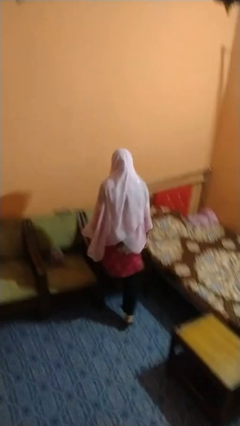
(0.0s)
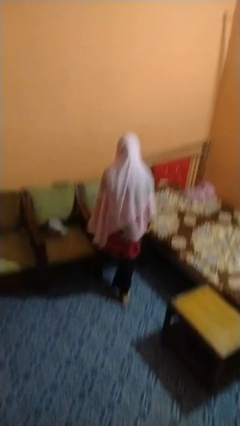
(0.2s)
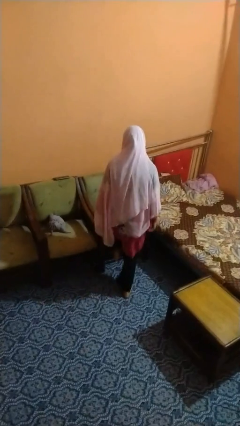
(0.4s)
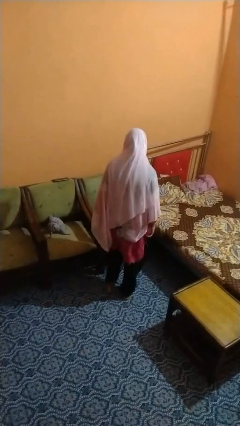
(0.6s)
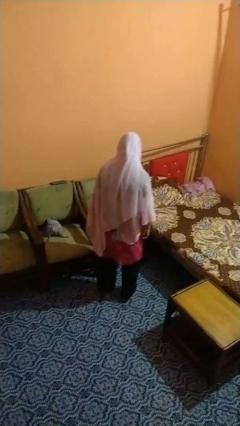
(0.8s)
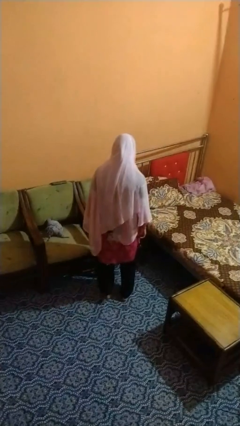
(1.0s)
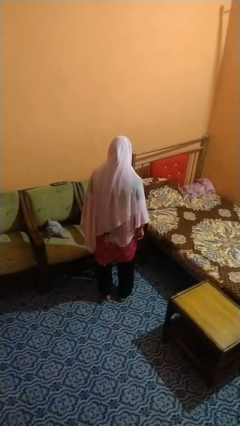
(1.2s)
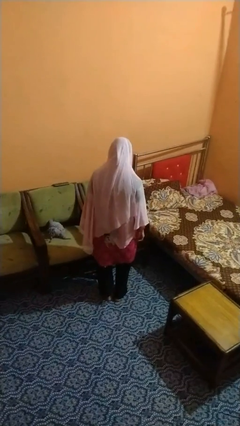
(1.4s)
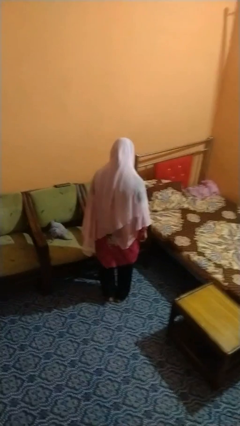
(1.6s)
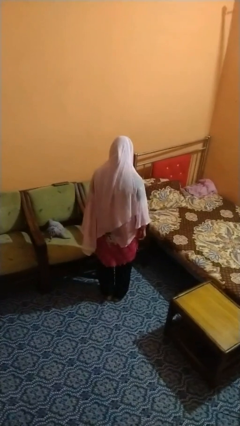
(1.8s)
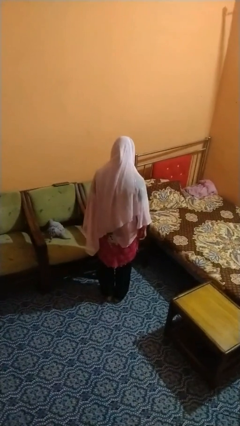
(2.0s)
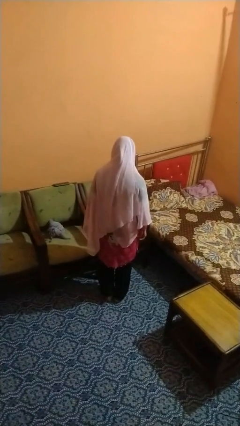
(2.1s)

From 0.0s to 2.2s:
person climbs off chair

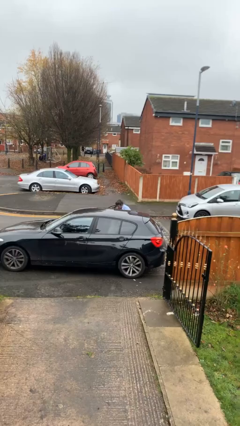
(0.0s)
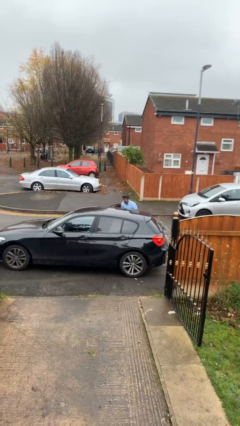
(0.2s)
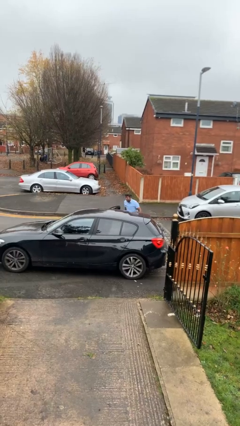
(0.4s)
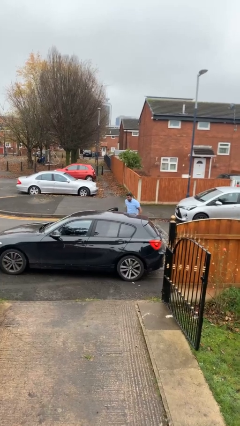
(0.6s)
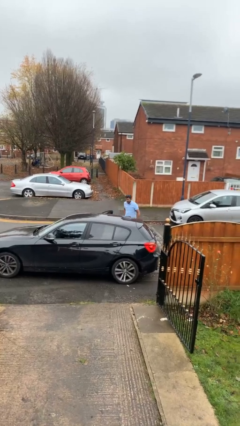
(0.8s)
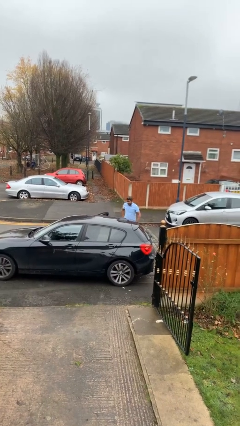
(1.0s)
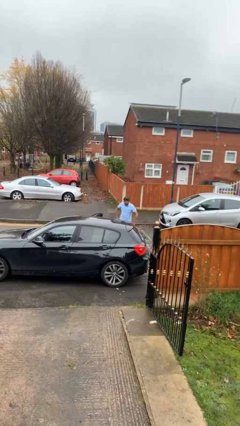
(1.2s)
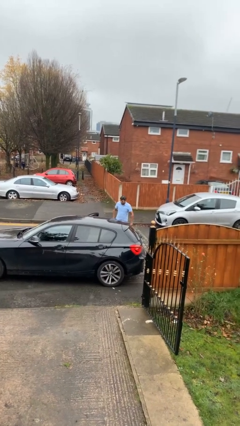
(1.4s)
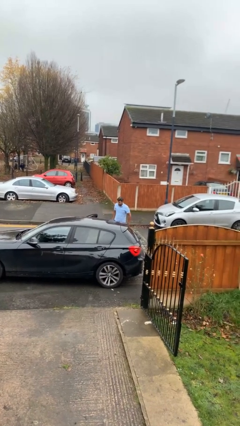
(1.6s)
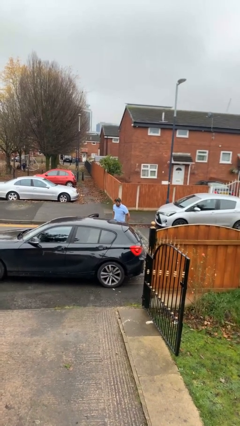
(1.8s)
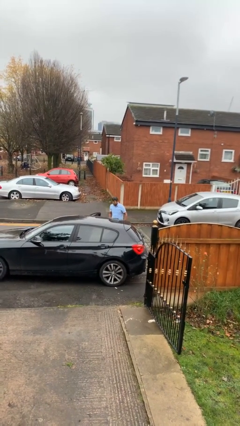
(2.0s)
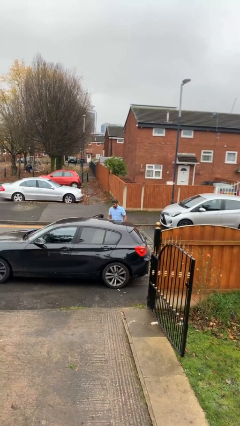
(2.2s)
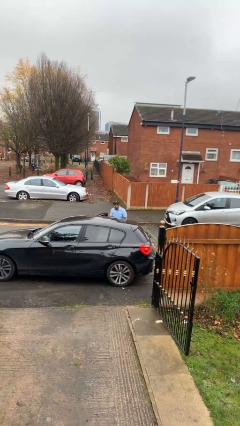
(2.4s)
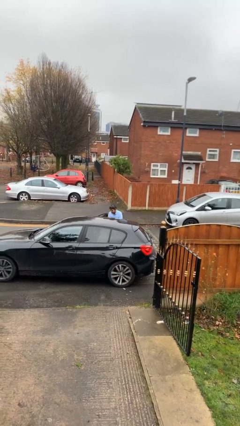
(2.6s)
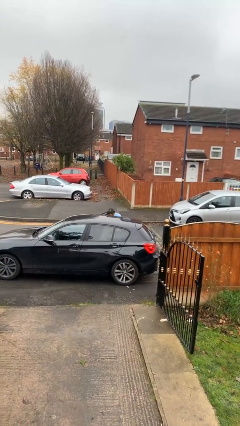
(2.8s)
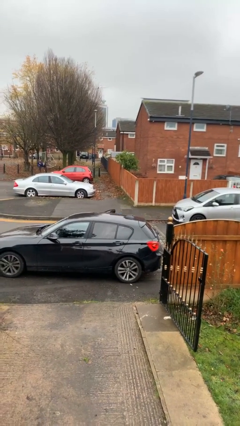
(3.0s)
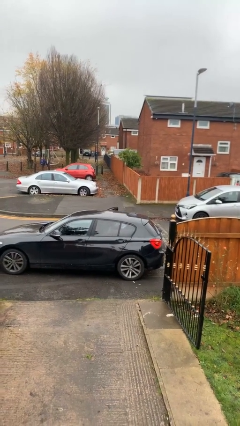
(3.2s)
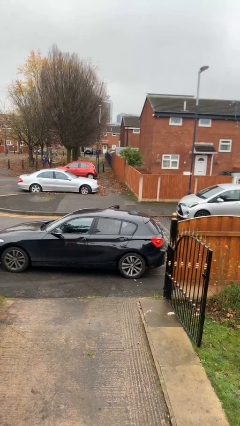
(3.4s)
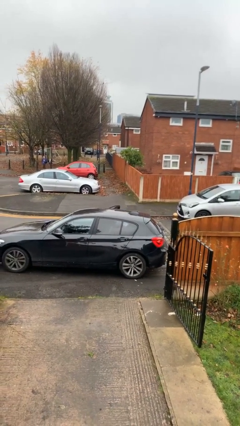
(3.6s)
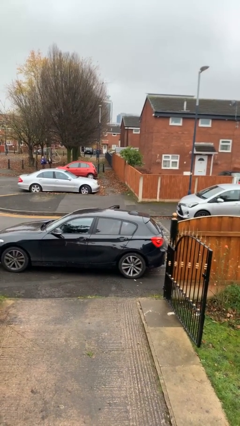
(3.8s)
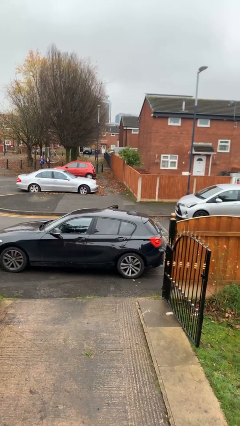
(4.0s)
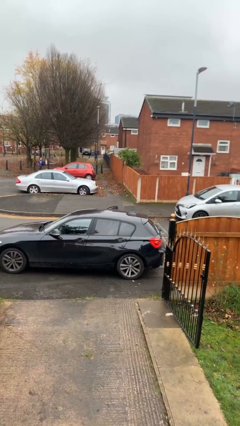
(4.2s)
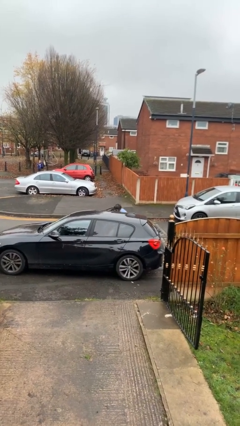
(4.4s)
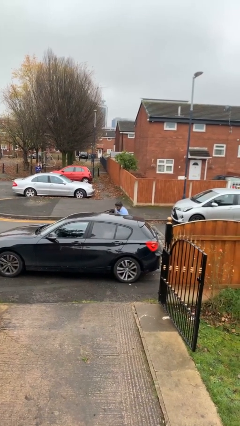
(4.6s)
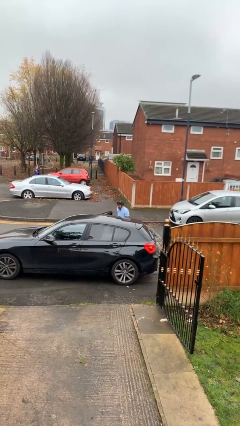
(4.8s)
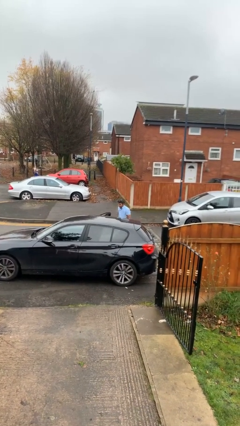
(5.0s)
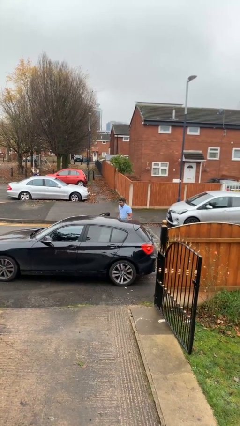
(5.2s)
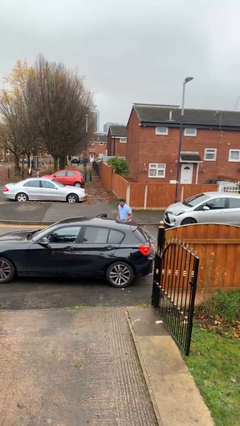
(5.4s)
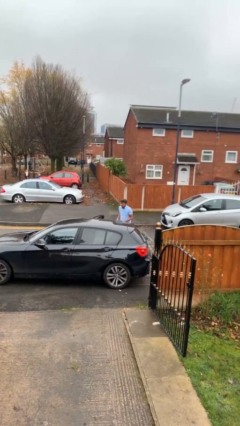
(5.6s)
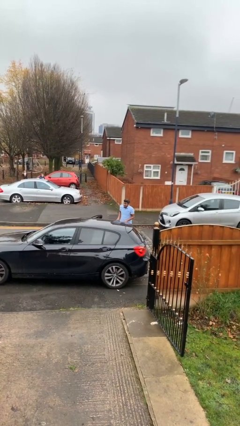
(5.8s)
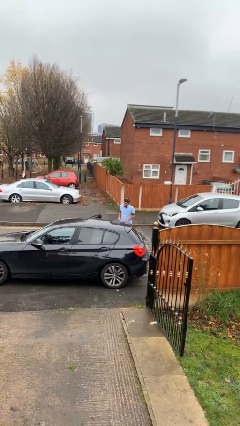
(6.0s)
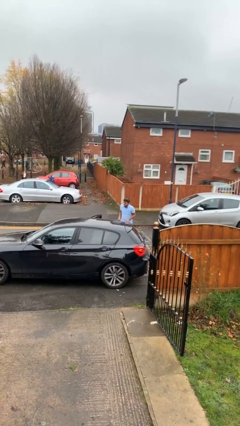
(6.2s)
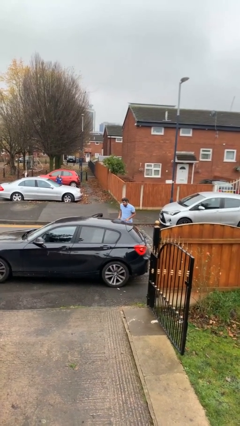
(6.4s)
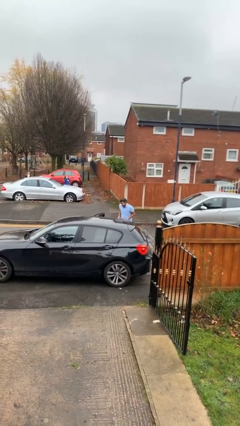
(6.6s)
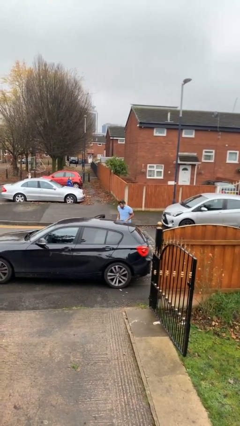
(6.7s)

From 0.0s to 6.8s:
person unloads car

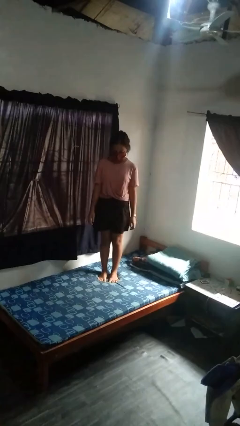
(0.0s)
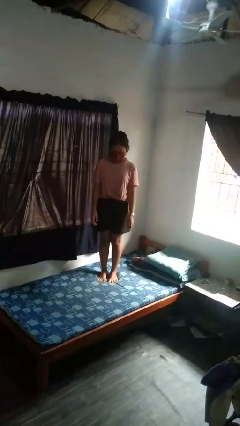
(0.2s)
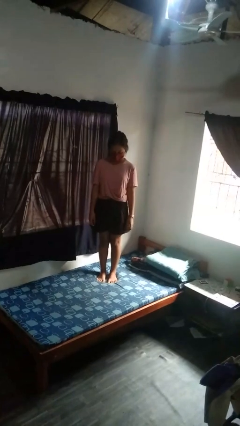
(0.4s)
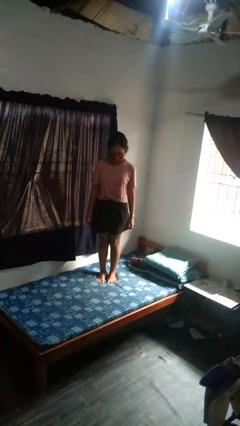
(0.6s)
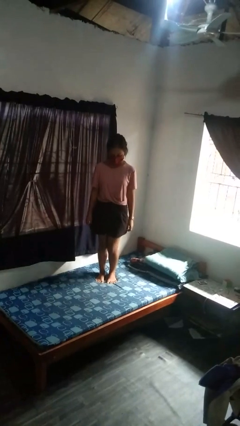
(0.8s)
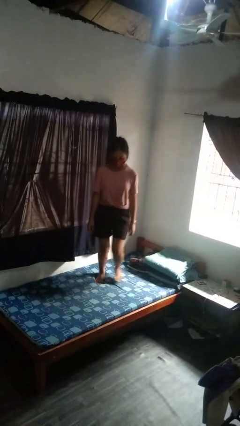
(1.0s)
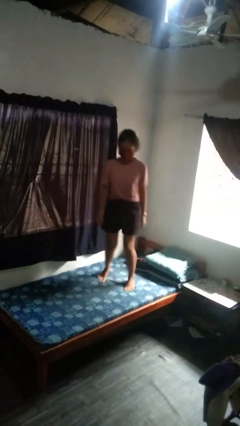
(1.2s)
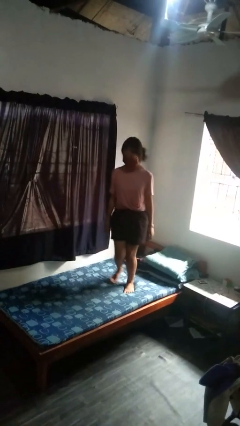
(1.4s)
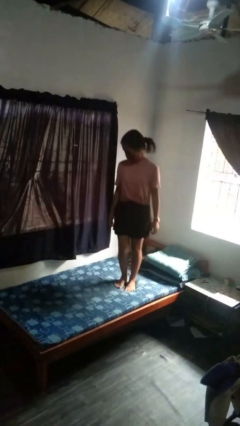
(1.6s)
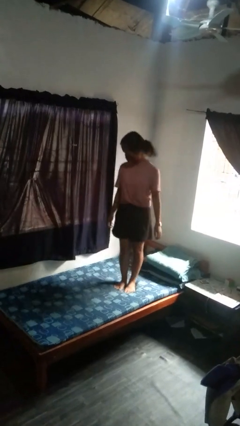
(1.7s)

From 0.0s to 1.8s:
person jumps on bed

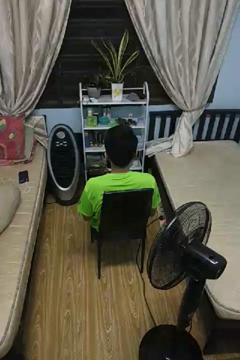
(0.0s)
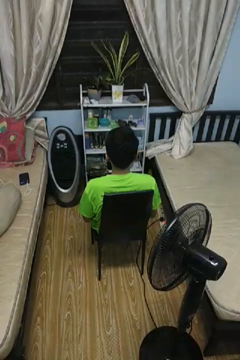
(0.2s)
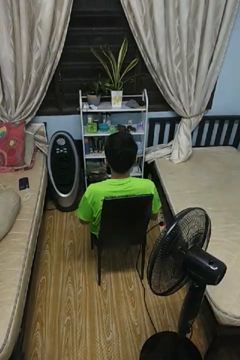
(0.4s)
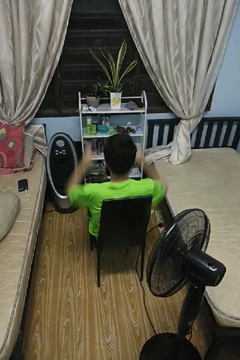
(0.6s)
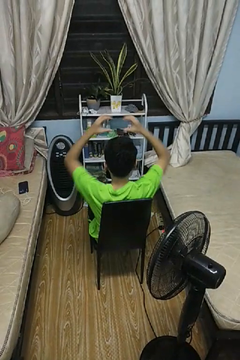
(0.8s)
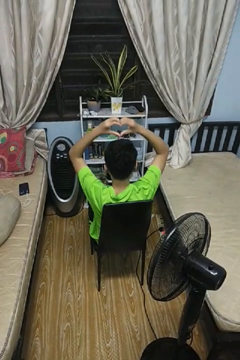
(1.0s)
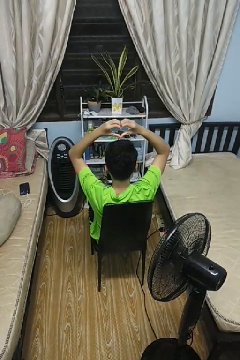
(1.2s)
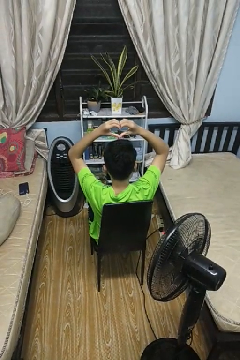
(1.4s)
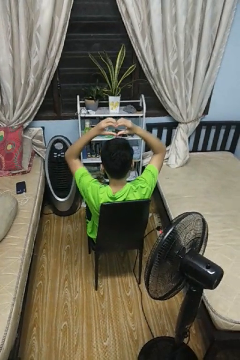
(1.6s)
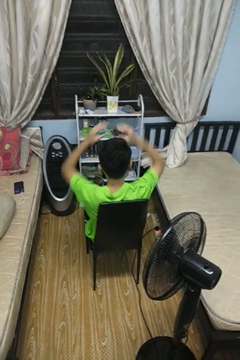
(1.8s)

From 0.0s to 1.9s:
person gestures heart

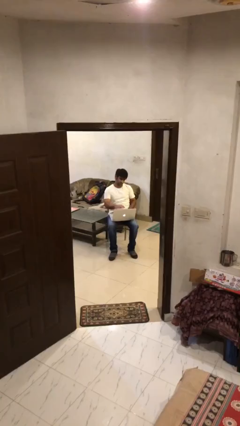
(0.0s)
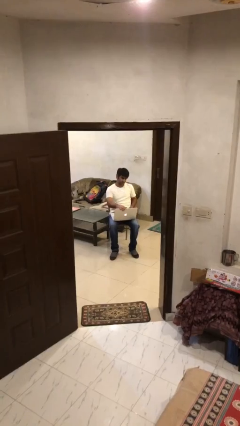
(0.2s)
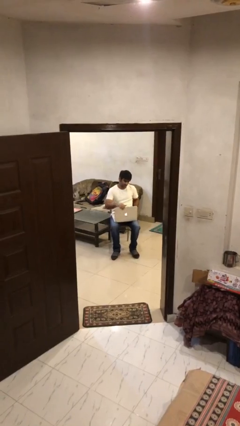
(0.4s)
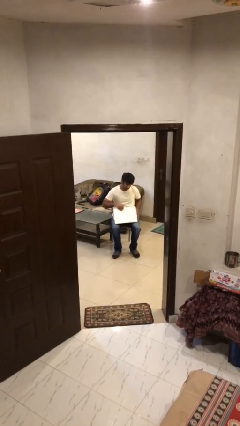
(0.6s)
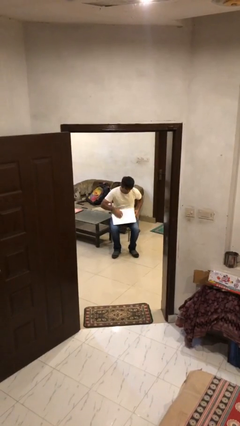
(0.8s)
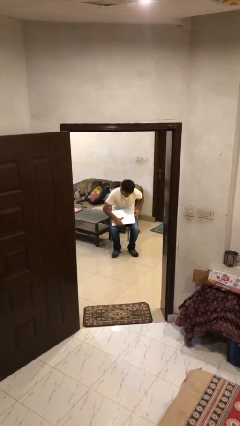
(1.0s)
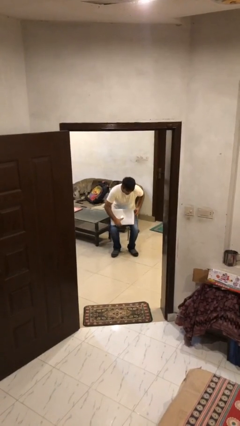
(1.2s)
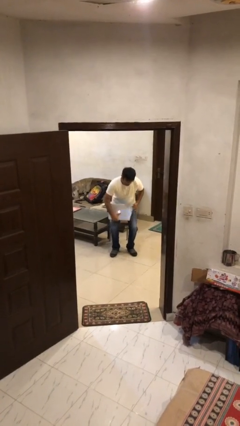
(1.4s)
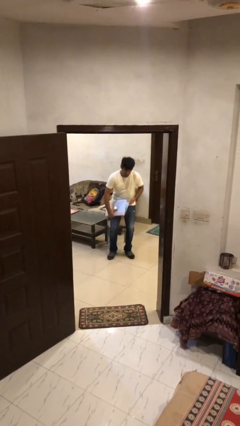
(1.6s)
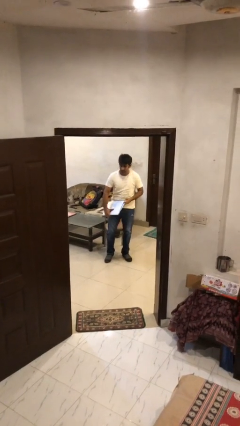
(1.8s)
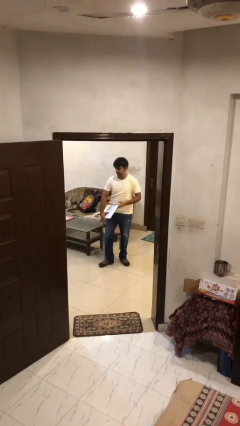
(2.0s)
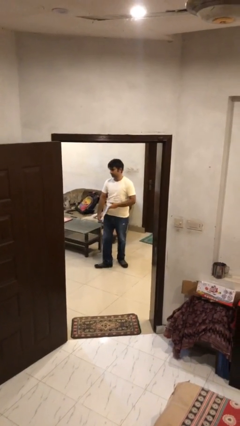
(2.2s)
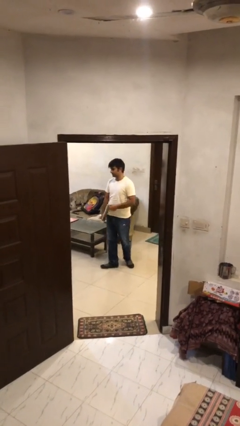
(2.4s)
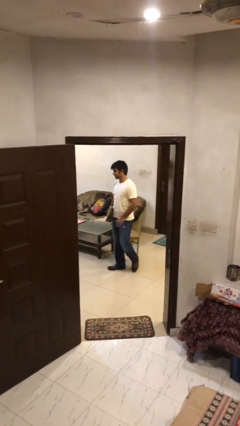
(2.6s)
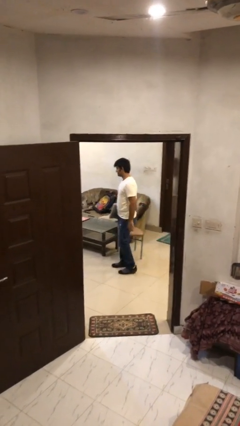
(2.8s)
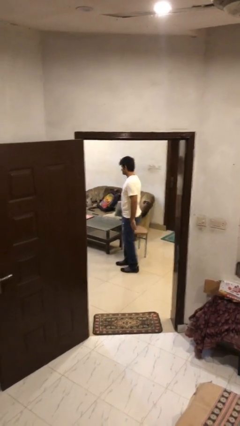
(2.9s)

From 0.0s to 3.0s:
person stands up

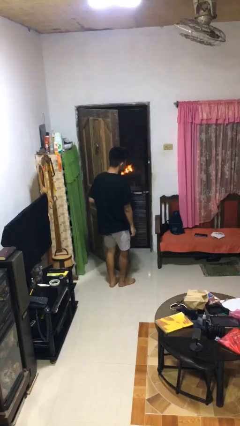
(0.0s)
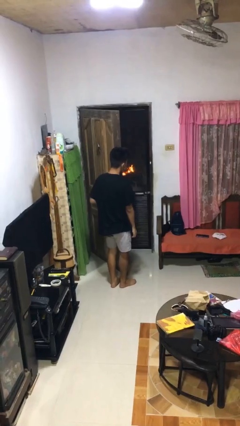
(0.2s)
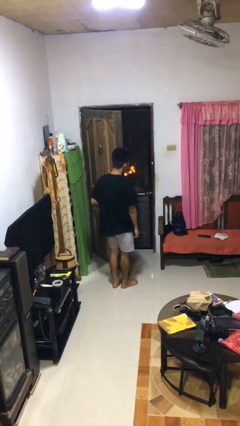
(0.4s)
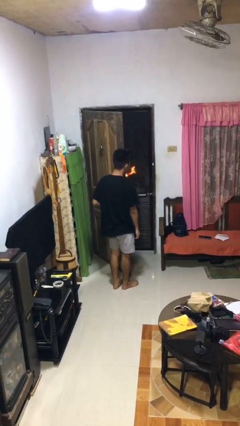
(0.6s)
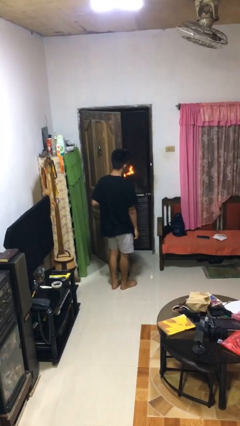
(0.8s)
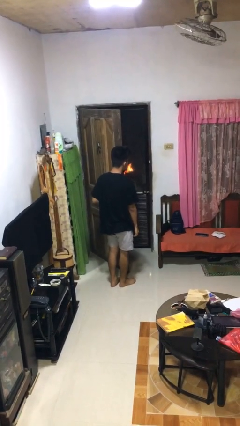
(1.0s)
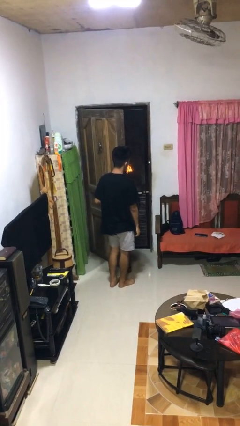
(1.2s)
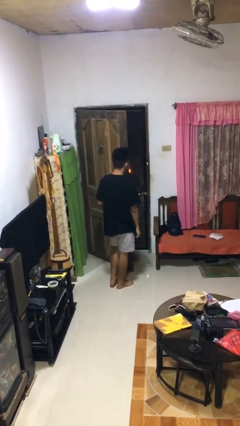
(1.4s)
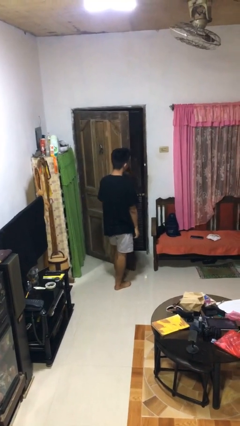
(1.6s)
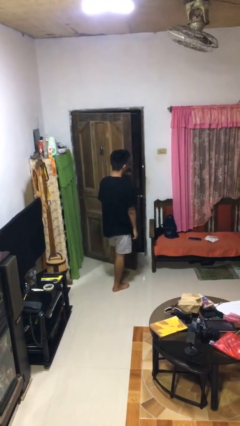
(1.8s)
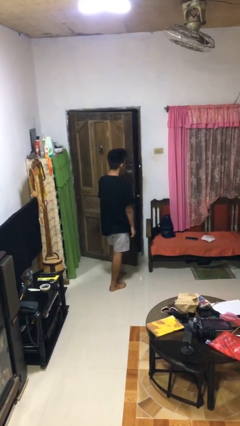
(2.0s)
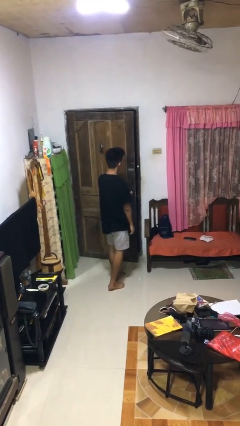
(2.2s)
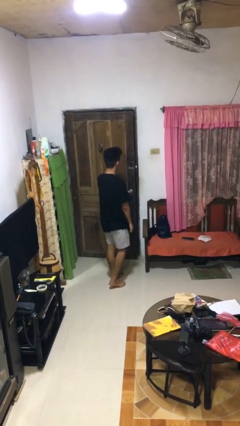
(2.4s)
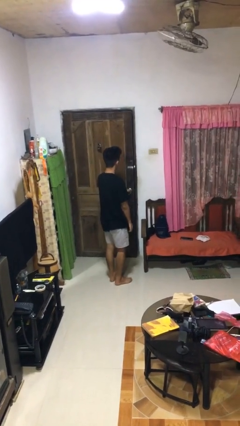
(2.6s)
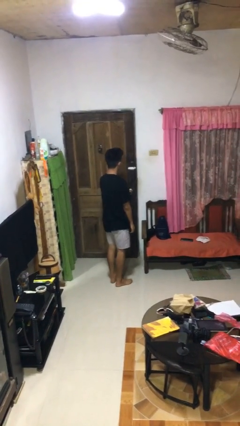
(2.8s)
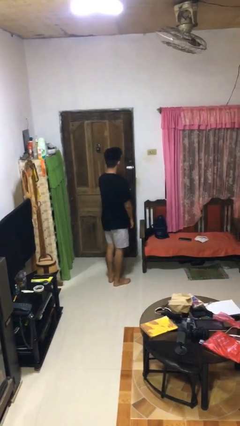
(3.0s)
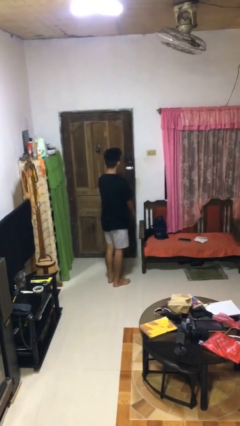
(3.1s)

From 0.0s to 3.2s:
person closes facility door
